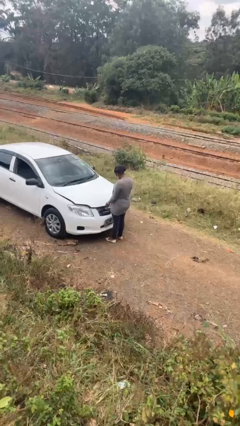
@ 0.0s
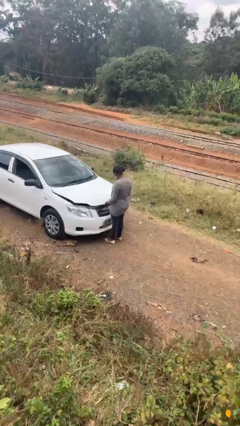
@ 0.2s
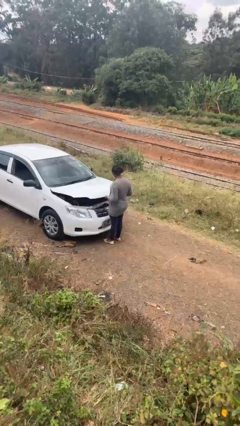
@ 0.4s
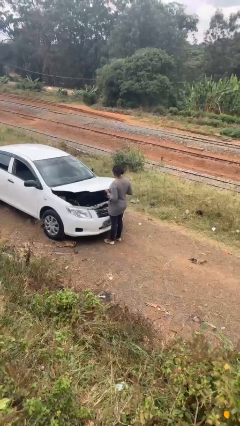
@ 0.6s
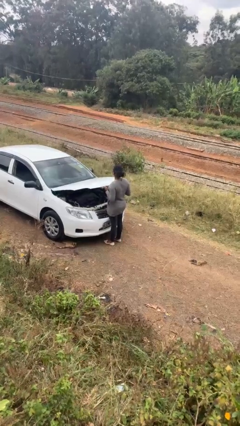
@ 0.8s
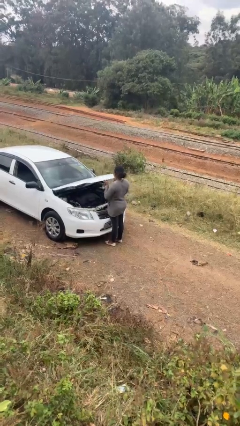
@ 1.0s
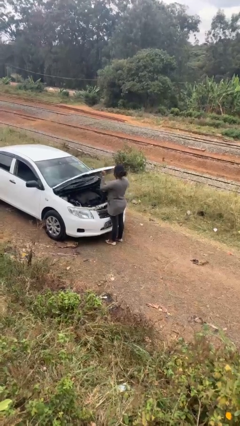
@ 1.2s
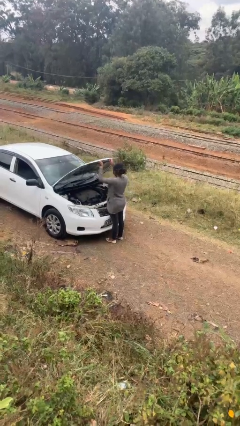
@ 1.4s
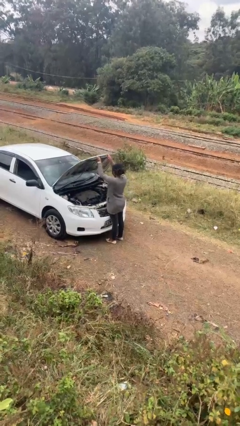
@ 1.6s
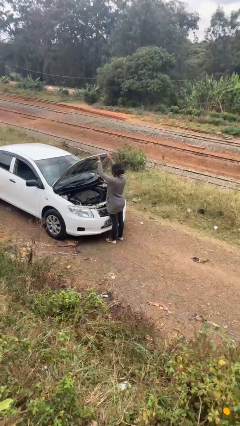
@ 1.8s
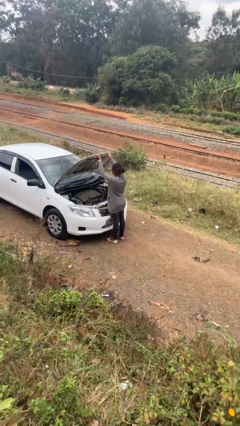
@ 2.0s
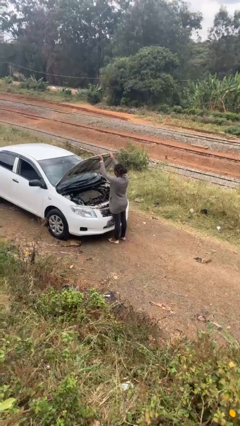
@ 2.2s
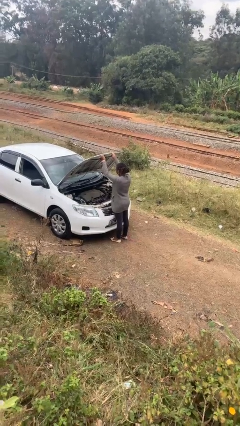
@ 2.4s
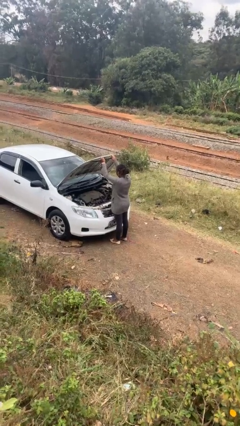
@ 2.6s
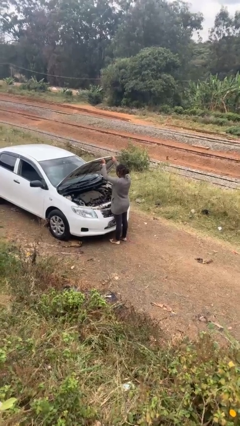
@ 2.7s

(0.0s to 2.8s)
person opens car hood

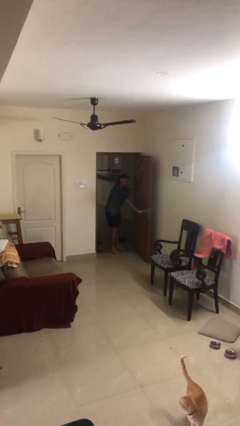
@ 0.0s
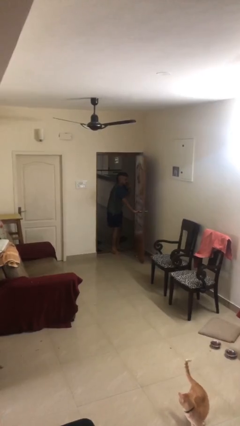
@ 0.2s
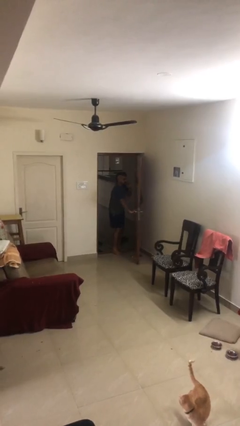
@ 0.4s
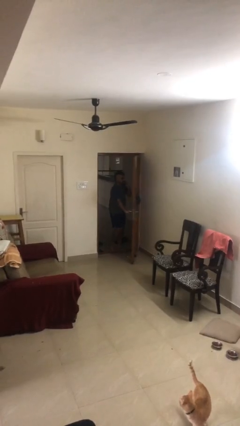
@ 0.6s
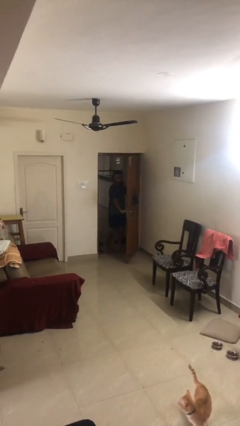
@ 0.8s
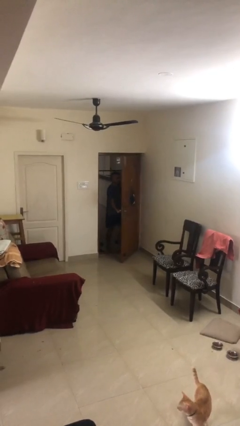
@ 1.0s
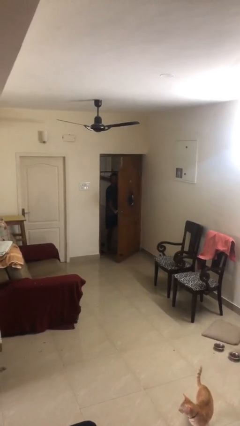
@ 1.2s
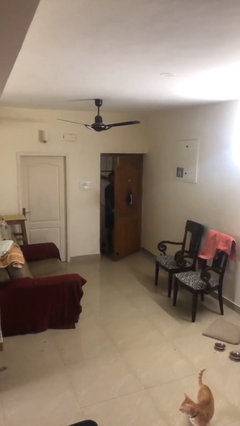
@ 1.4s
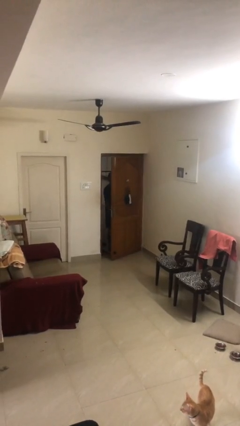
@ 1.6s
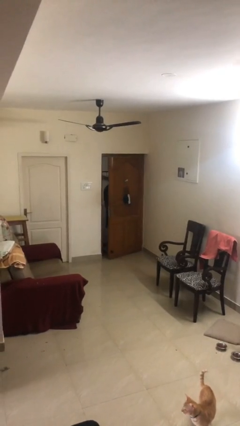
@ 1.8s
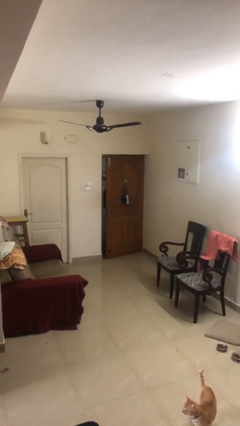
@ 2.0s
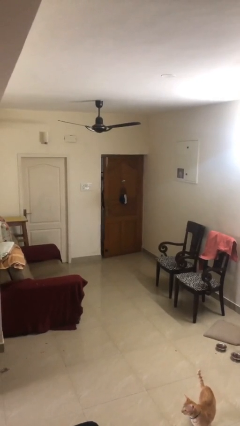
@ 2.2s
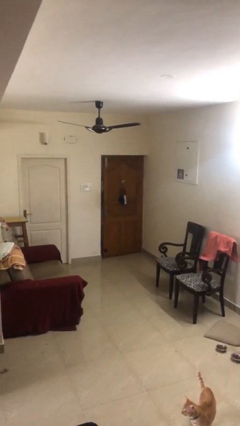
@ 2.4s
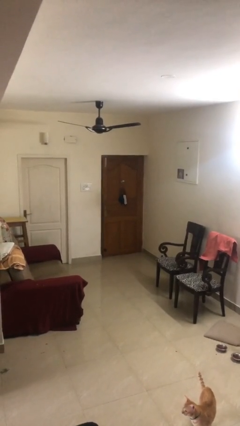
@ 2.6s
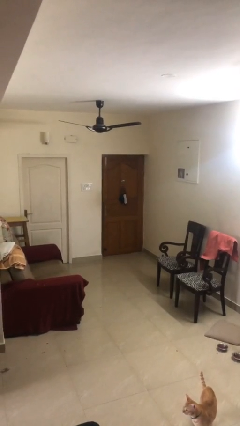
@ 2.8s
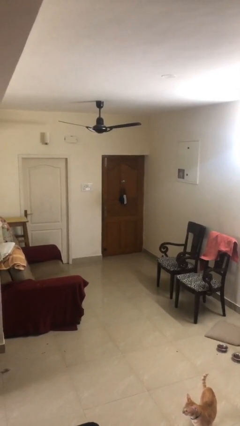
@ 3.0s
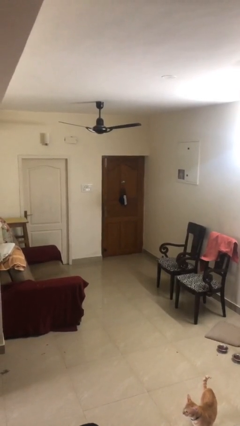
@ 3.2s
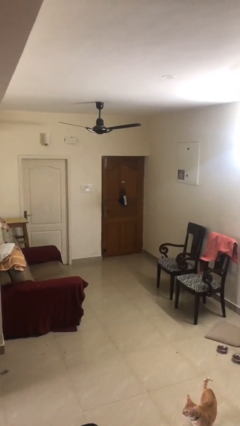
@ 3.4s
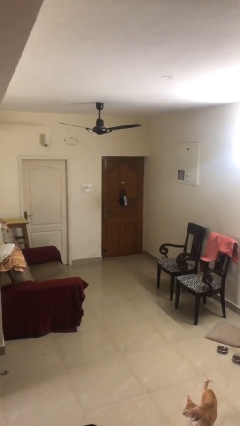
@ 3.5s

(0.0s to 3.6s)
person closes facility door

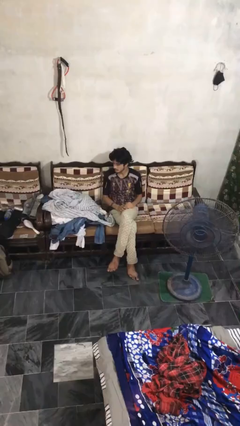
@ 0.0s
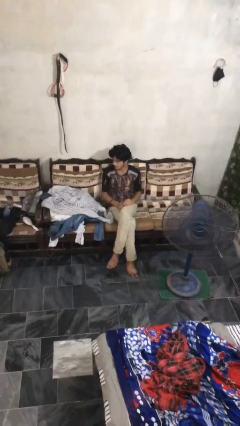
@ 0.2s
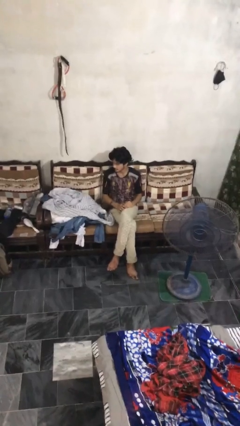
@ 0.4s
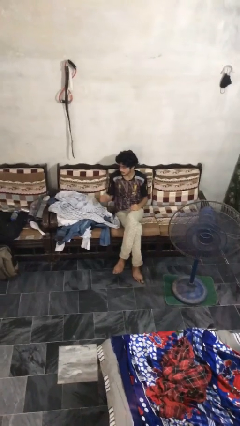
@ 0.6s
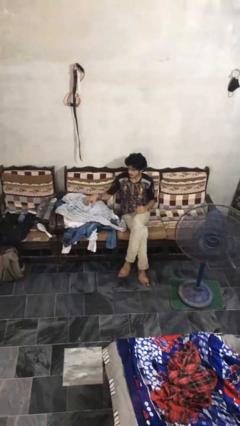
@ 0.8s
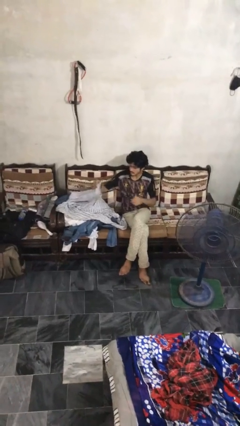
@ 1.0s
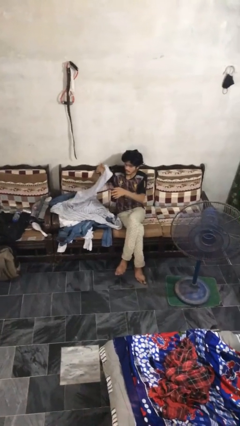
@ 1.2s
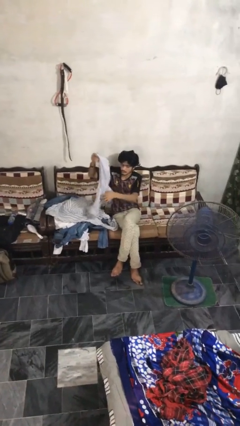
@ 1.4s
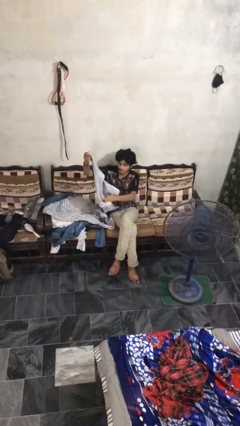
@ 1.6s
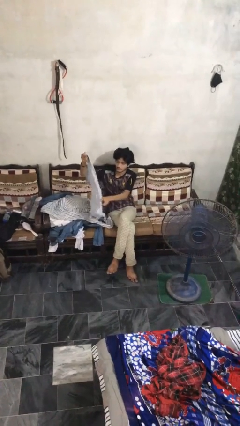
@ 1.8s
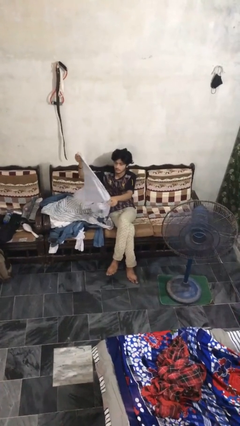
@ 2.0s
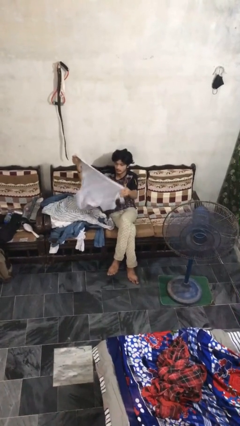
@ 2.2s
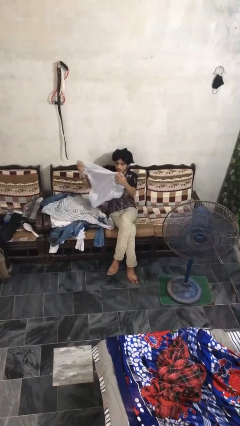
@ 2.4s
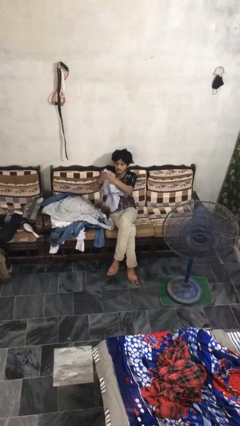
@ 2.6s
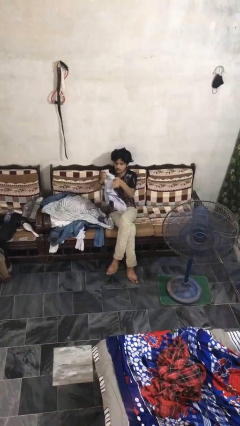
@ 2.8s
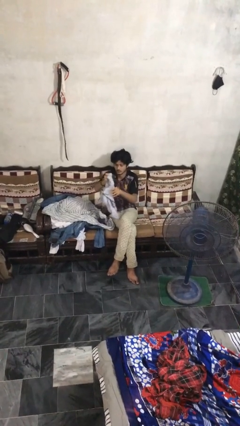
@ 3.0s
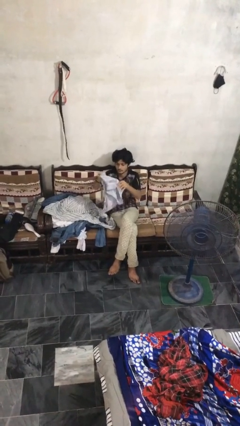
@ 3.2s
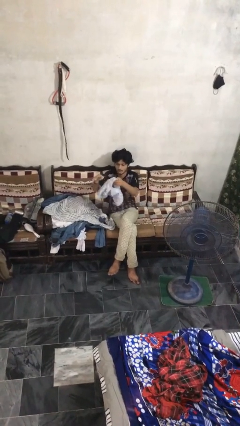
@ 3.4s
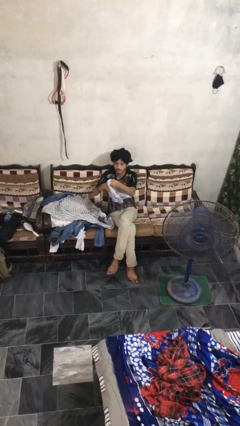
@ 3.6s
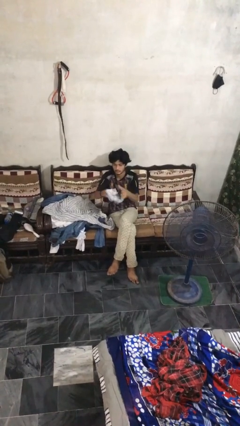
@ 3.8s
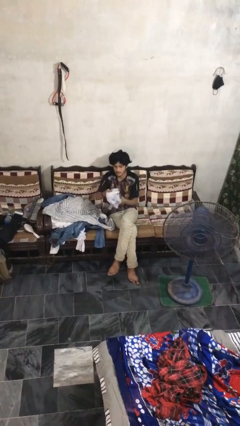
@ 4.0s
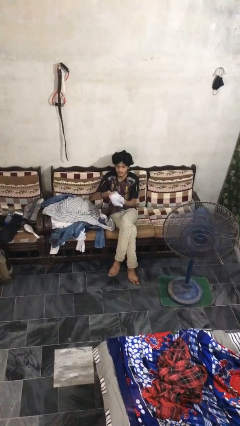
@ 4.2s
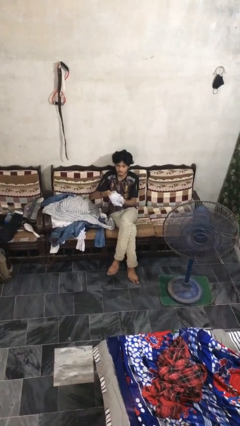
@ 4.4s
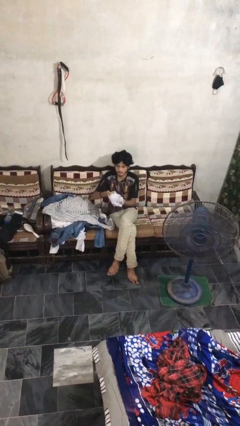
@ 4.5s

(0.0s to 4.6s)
person folds shirt

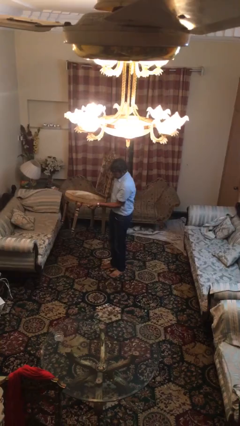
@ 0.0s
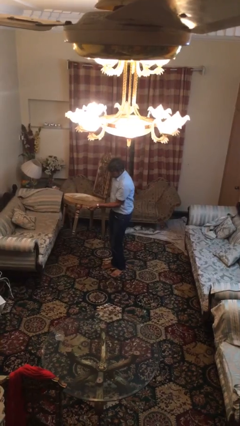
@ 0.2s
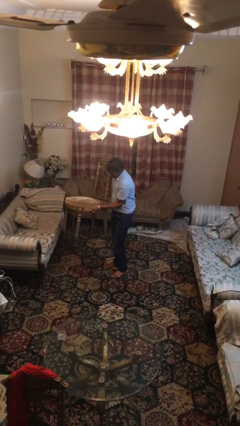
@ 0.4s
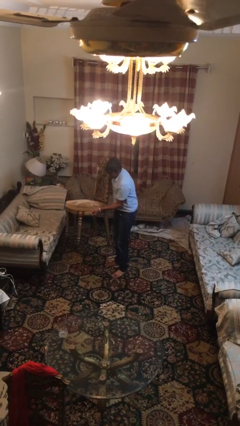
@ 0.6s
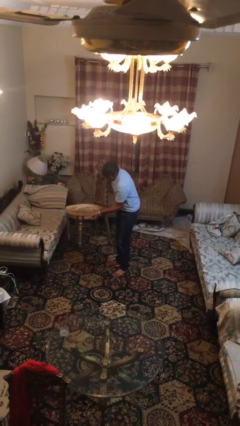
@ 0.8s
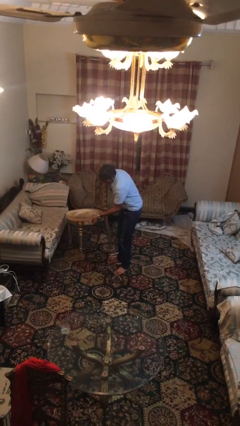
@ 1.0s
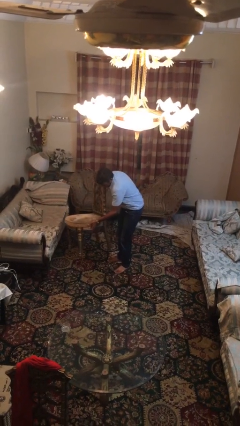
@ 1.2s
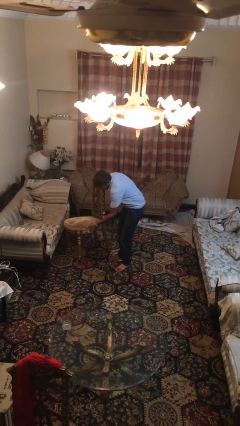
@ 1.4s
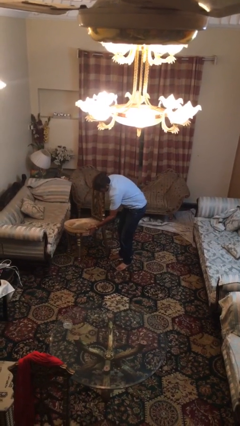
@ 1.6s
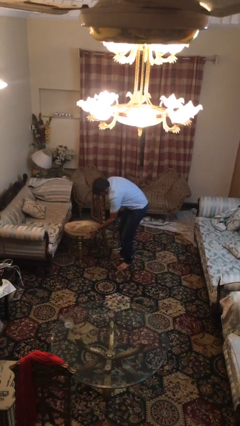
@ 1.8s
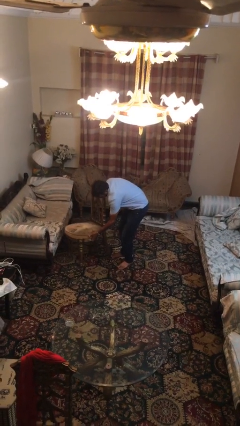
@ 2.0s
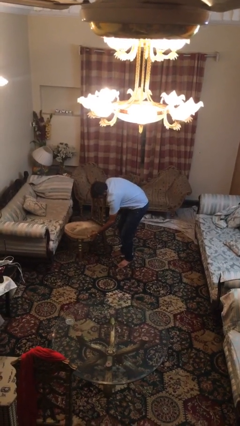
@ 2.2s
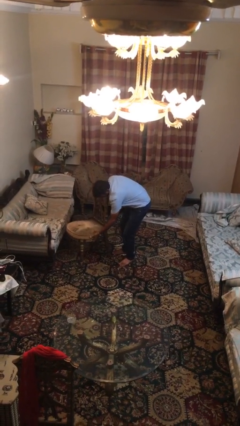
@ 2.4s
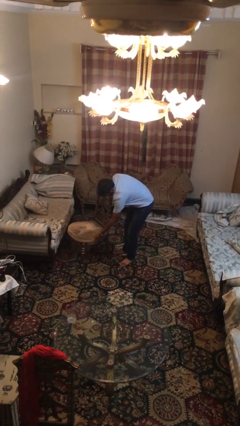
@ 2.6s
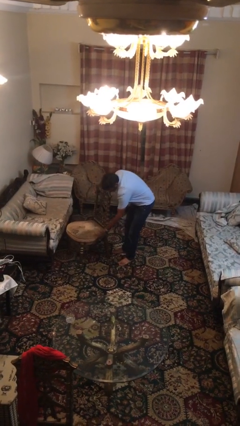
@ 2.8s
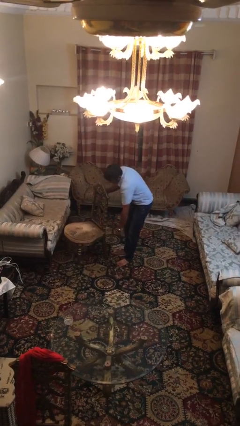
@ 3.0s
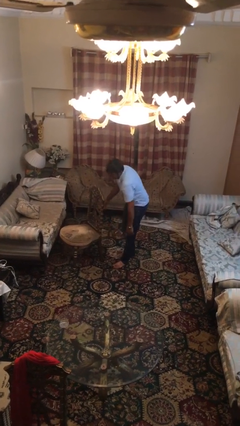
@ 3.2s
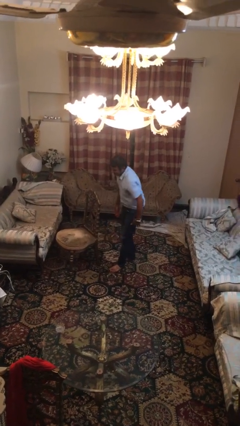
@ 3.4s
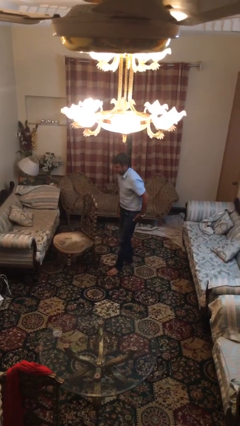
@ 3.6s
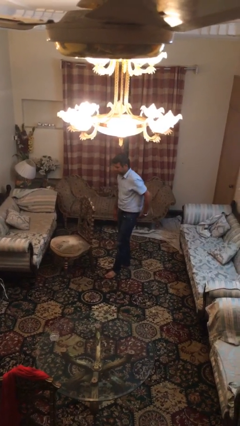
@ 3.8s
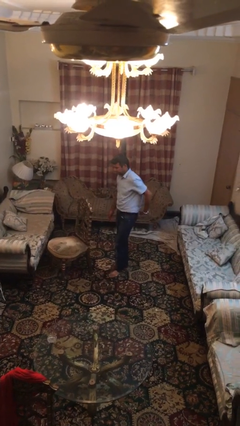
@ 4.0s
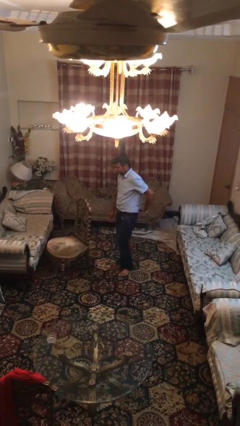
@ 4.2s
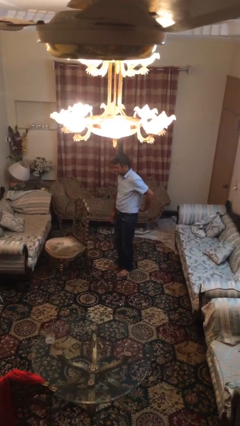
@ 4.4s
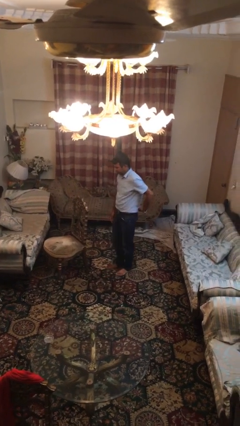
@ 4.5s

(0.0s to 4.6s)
person puts down object on floor

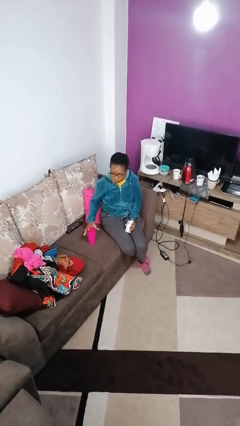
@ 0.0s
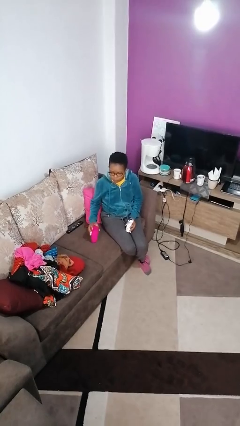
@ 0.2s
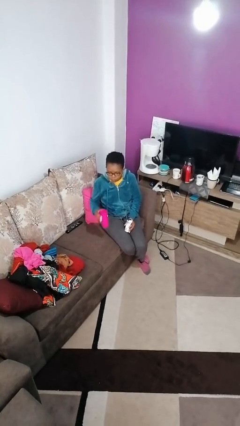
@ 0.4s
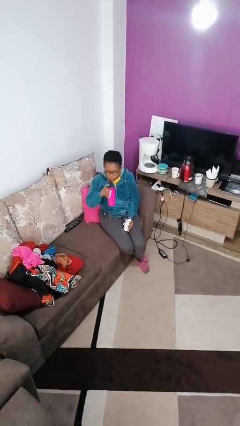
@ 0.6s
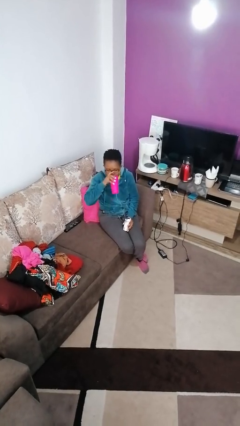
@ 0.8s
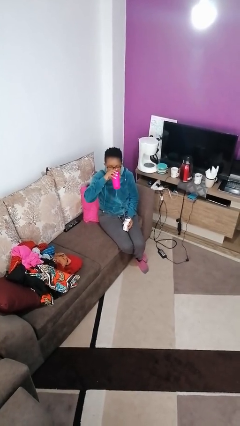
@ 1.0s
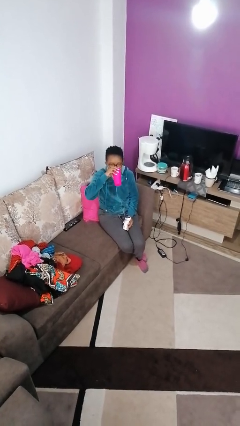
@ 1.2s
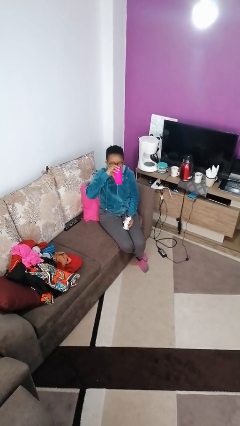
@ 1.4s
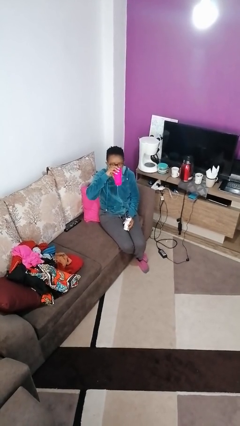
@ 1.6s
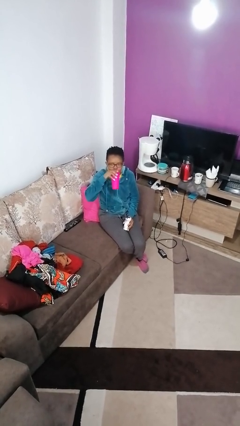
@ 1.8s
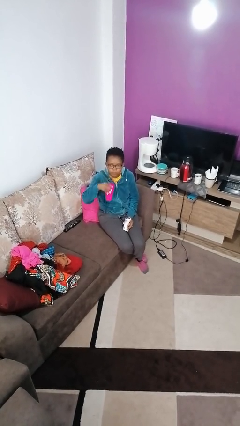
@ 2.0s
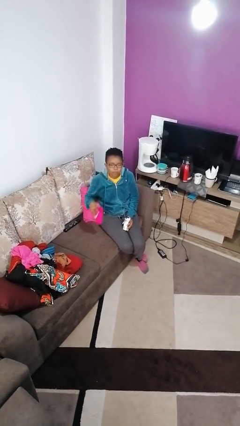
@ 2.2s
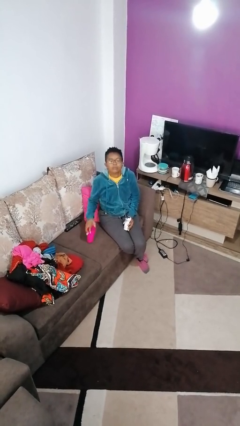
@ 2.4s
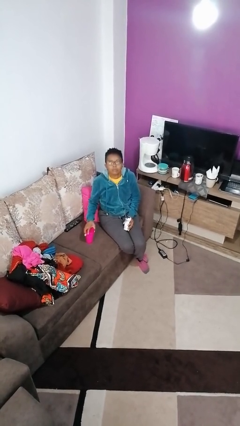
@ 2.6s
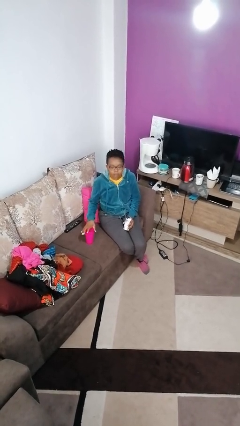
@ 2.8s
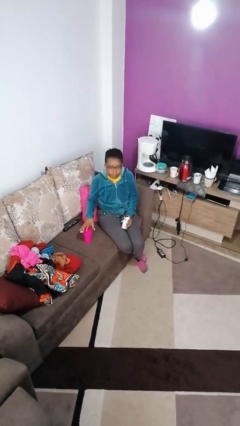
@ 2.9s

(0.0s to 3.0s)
person drinks from cup
